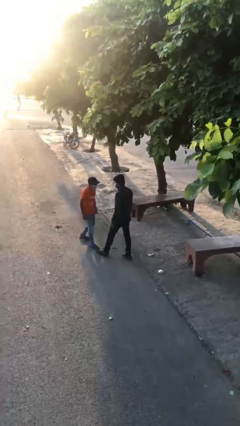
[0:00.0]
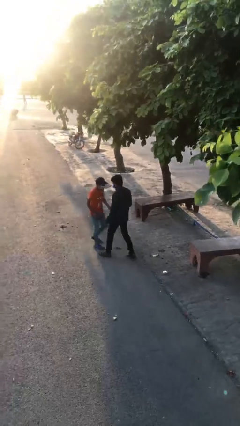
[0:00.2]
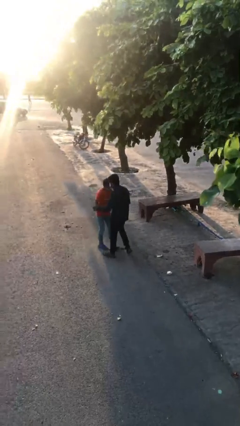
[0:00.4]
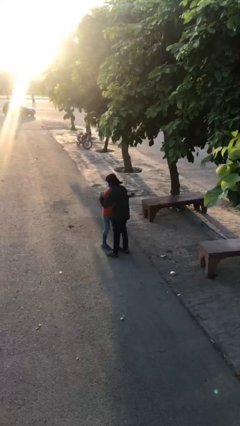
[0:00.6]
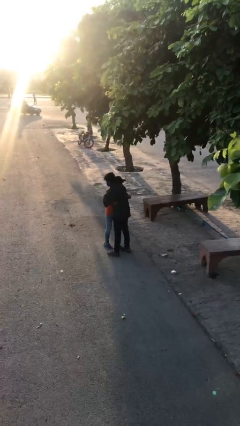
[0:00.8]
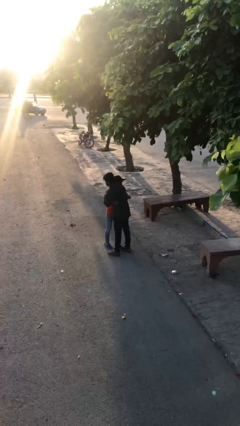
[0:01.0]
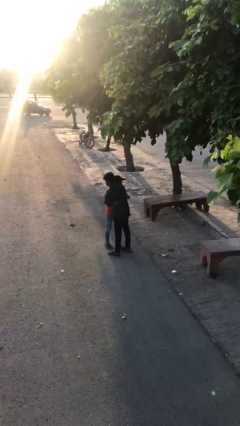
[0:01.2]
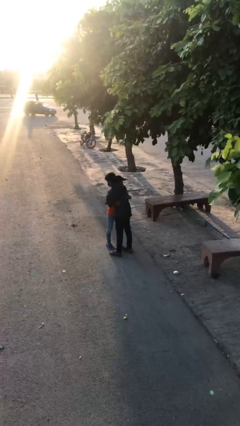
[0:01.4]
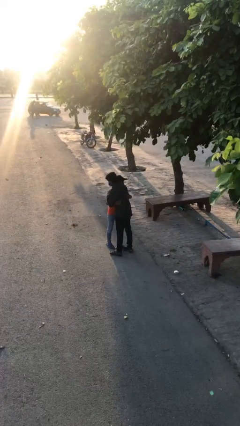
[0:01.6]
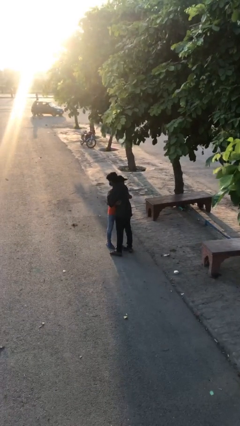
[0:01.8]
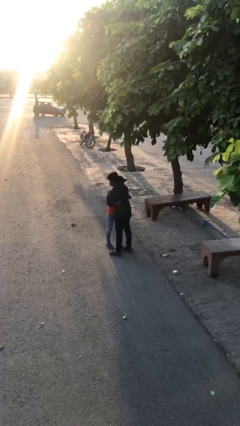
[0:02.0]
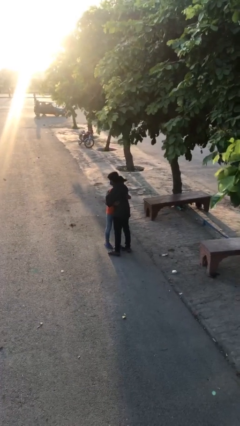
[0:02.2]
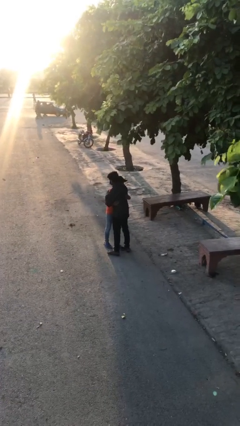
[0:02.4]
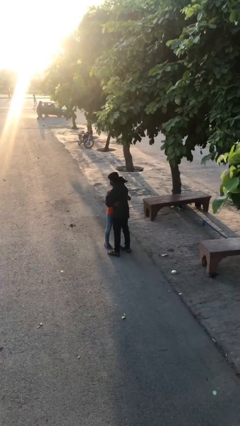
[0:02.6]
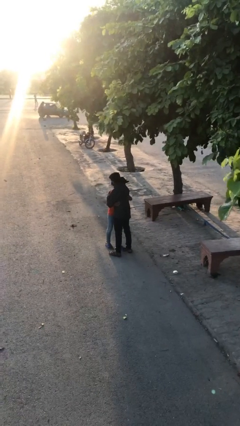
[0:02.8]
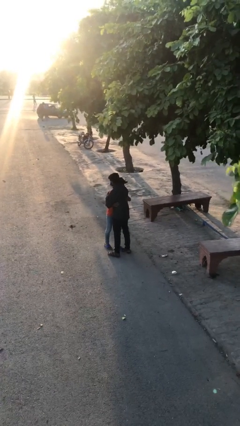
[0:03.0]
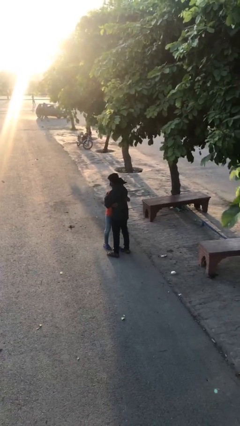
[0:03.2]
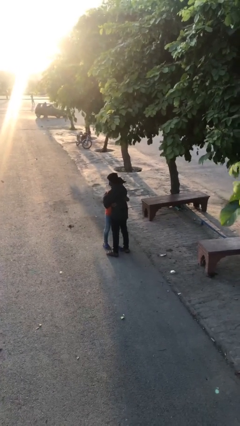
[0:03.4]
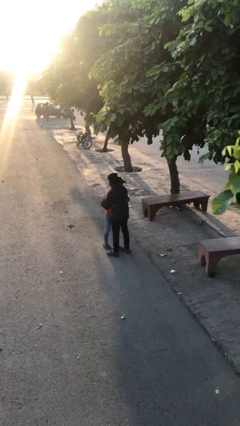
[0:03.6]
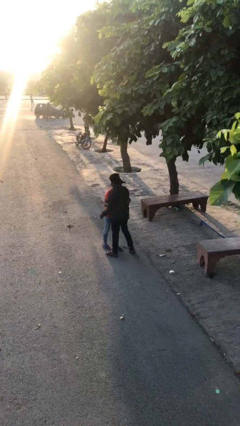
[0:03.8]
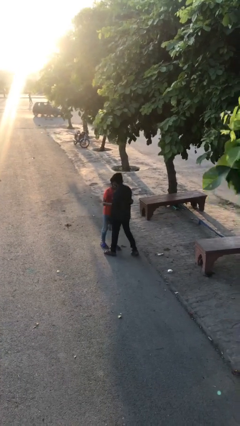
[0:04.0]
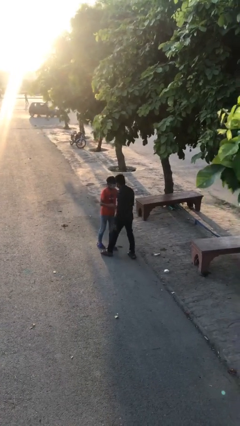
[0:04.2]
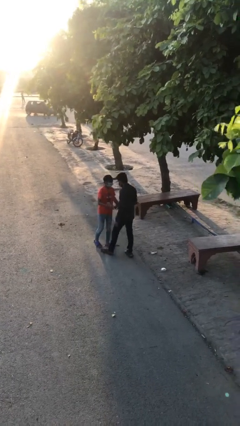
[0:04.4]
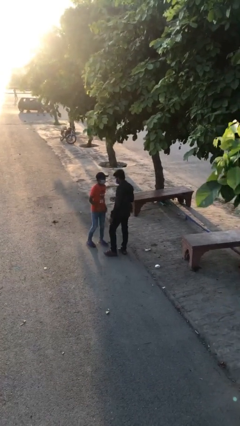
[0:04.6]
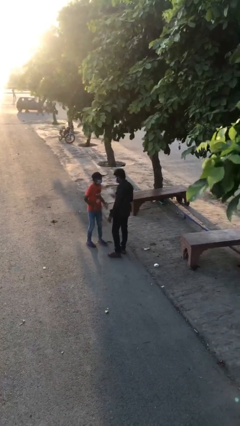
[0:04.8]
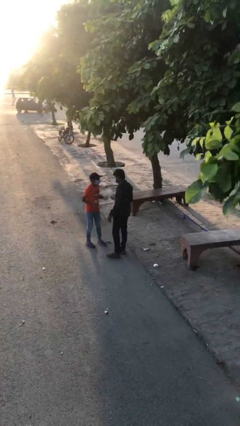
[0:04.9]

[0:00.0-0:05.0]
person embraces person

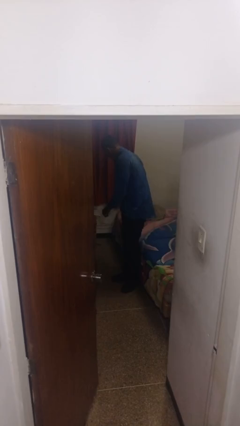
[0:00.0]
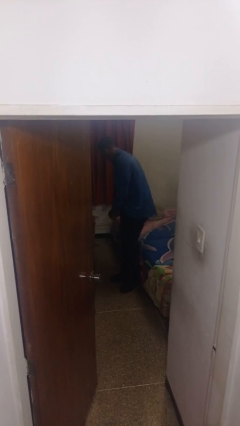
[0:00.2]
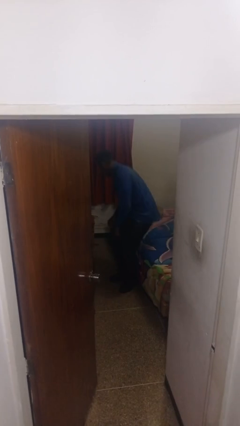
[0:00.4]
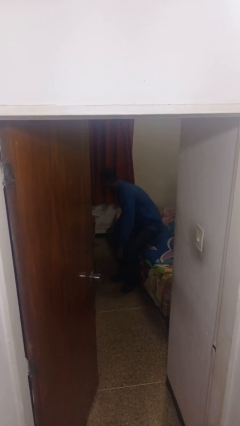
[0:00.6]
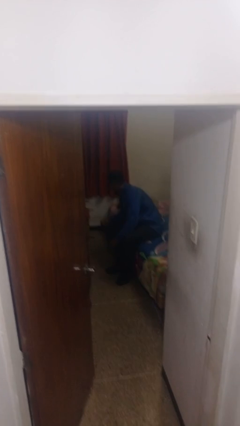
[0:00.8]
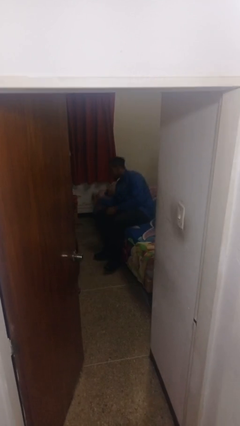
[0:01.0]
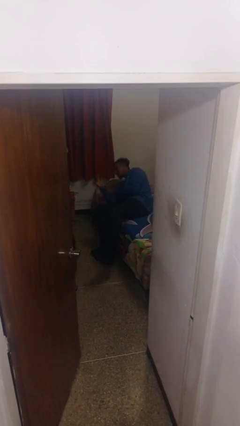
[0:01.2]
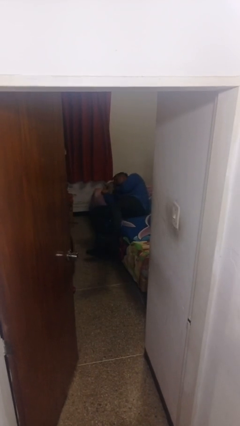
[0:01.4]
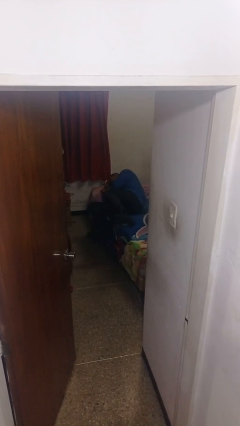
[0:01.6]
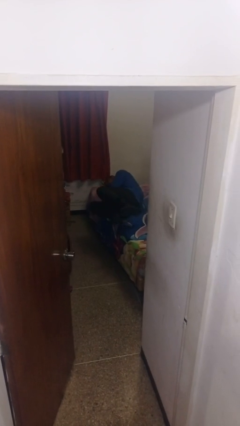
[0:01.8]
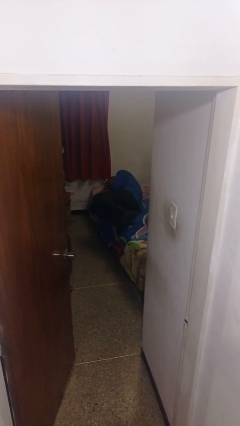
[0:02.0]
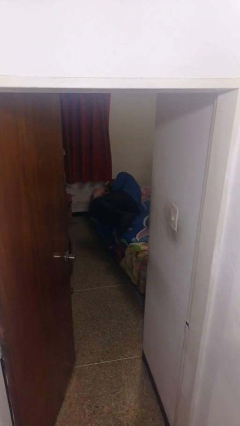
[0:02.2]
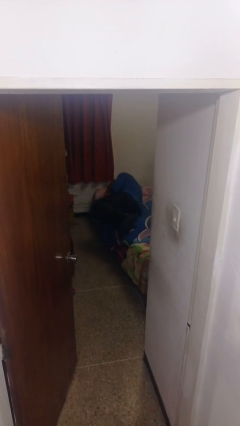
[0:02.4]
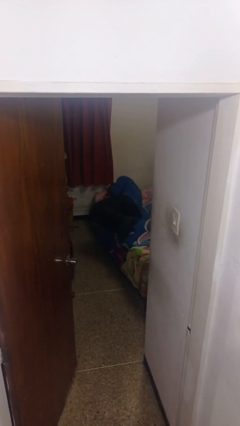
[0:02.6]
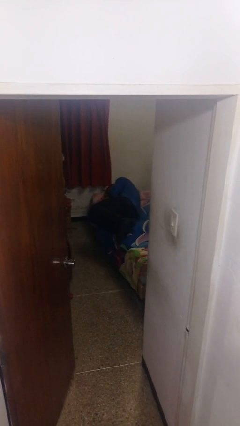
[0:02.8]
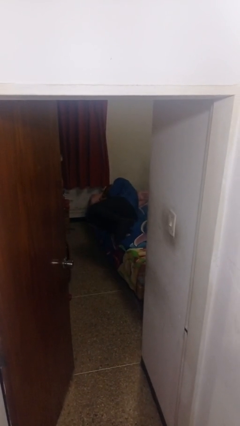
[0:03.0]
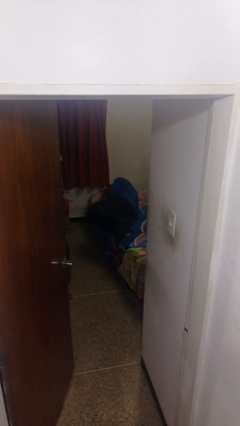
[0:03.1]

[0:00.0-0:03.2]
person lies down on bed

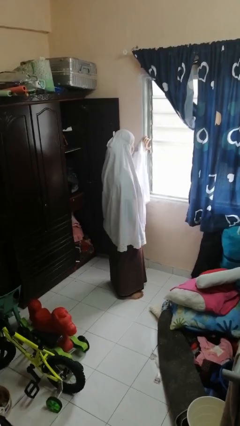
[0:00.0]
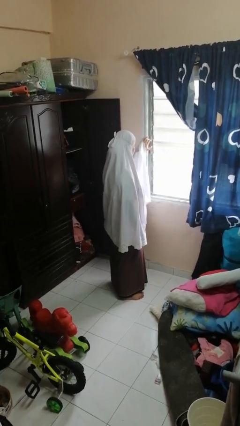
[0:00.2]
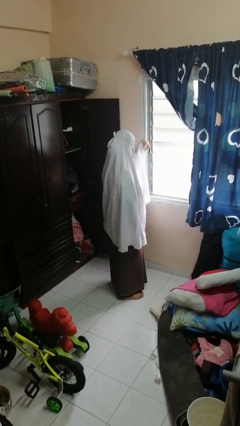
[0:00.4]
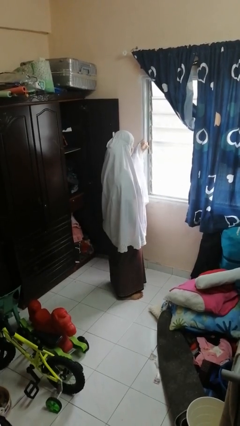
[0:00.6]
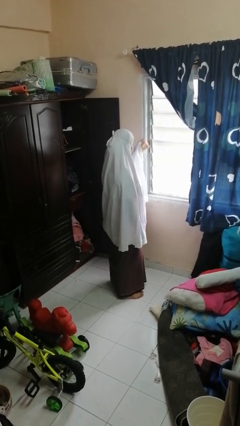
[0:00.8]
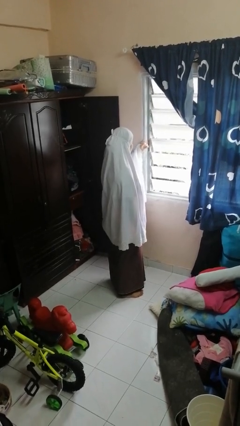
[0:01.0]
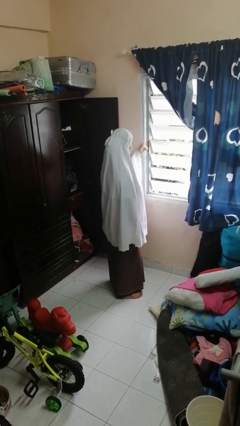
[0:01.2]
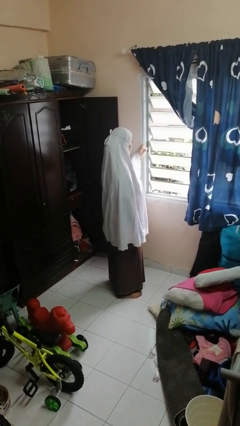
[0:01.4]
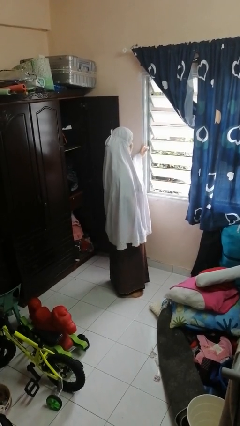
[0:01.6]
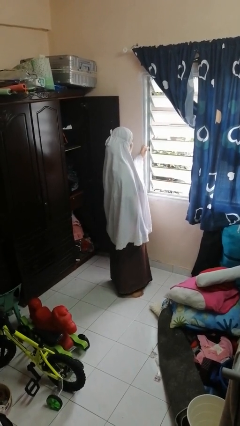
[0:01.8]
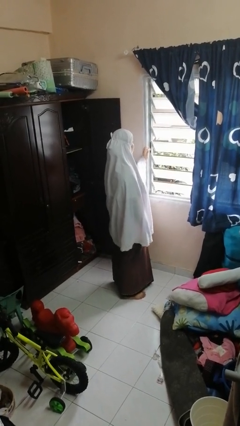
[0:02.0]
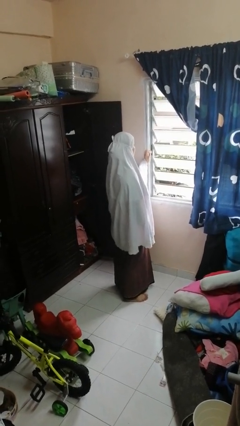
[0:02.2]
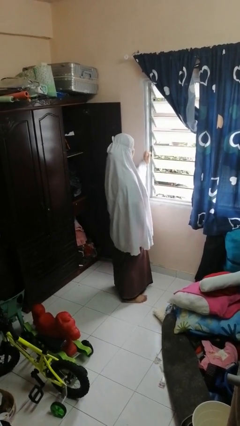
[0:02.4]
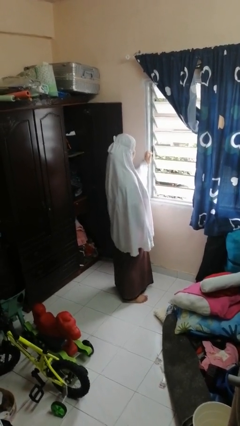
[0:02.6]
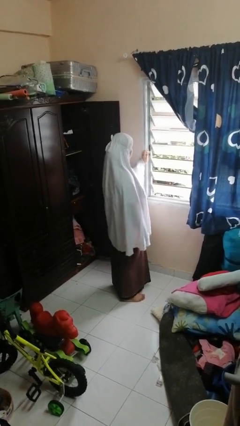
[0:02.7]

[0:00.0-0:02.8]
person opens home window

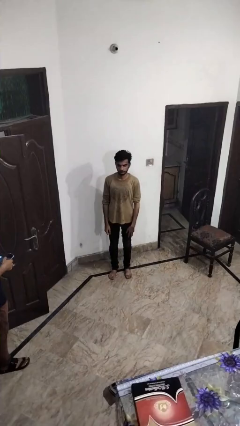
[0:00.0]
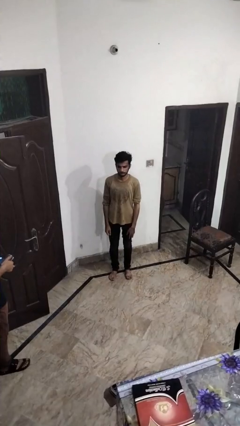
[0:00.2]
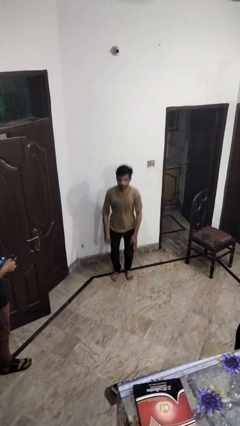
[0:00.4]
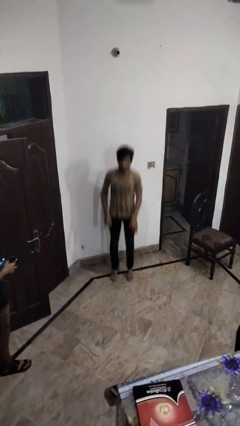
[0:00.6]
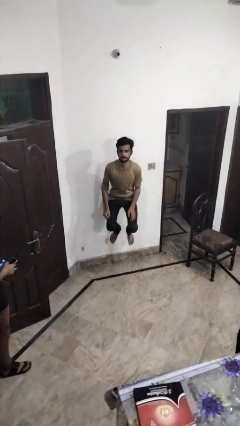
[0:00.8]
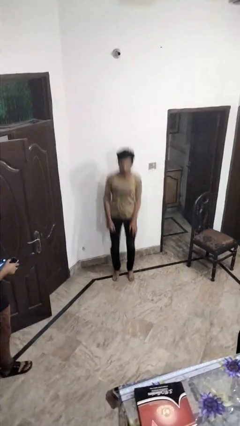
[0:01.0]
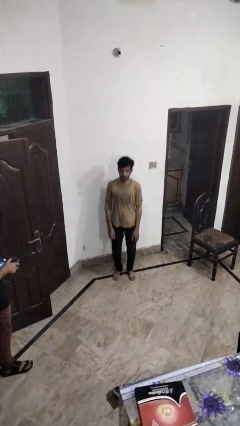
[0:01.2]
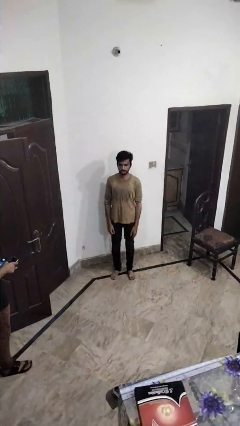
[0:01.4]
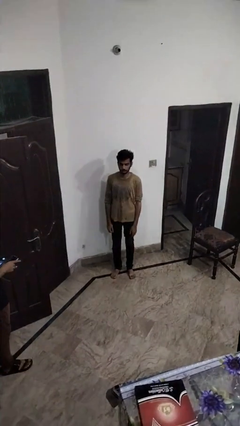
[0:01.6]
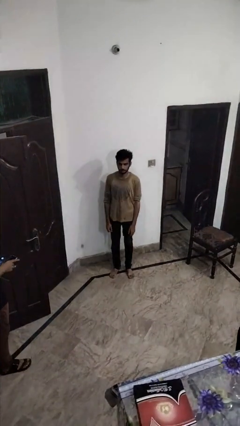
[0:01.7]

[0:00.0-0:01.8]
person jumps

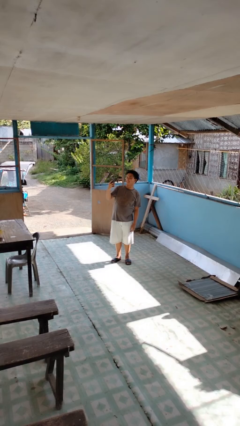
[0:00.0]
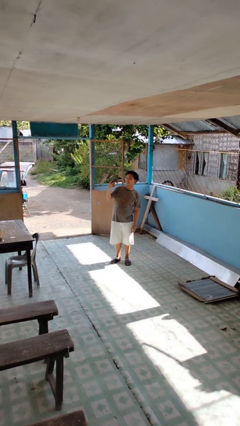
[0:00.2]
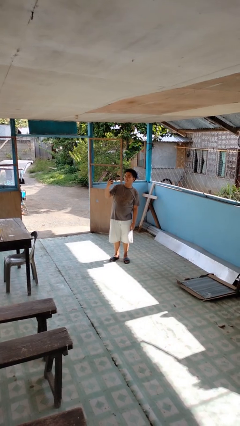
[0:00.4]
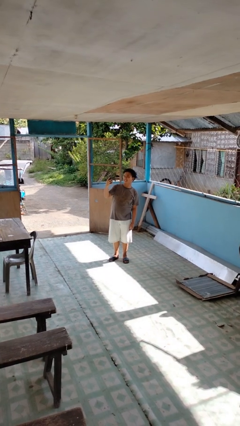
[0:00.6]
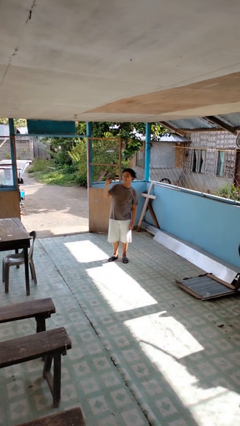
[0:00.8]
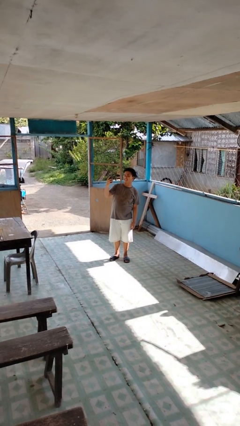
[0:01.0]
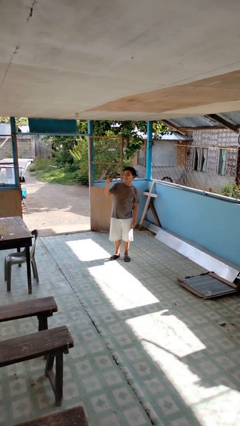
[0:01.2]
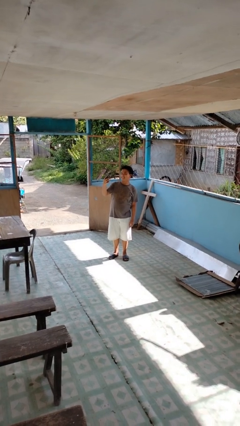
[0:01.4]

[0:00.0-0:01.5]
person takes selfie

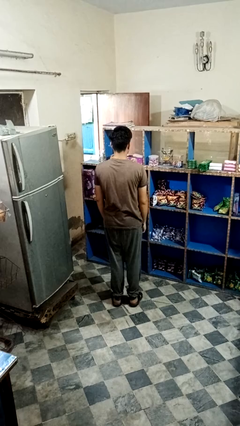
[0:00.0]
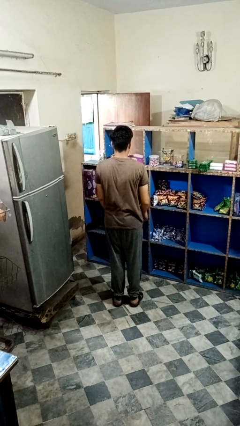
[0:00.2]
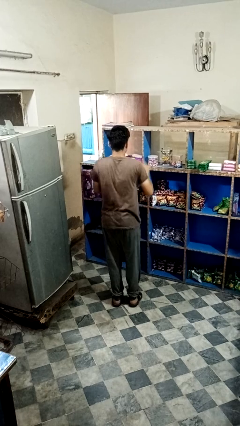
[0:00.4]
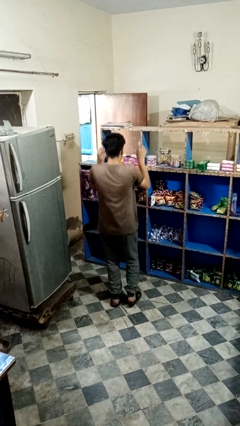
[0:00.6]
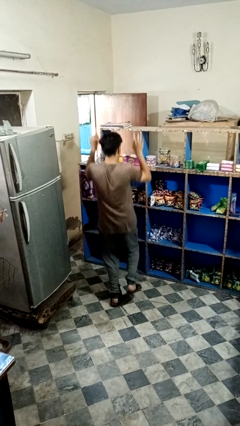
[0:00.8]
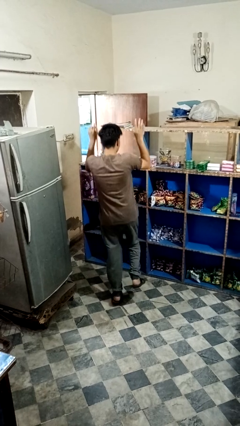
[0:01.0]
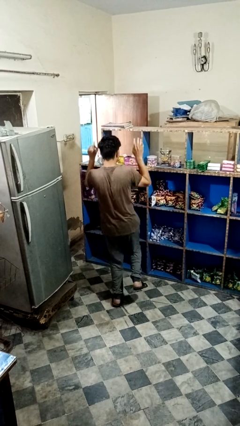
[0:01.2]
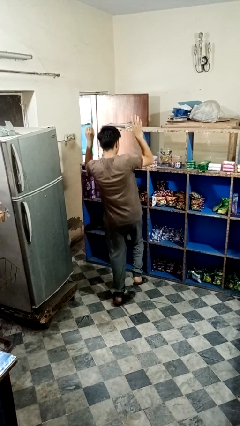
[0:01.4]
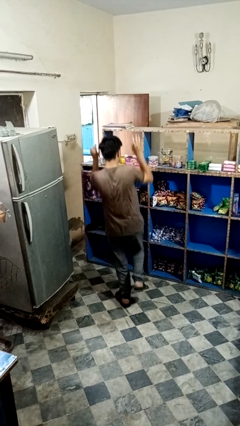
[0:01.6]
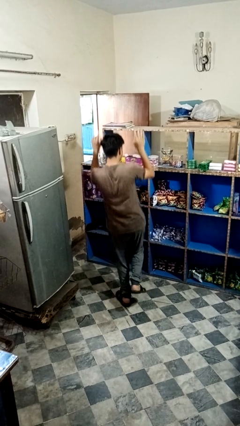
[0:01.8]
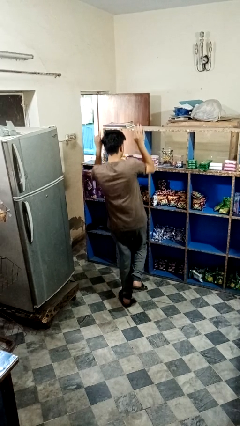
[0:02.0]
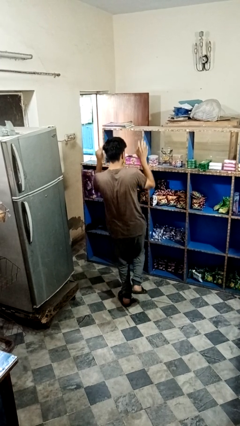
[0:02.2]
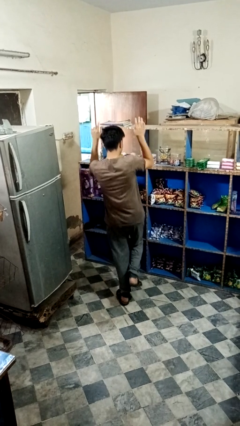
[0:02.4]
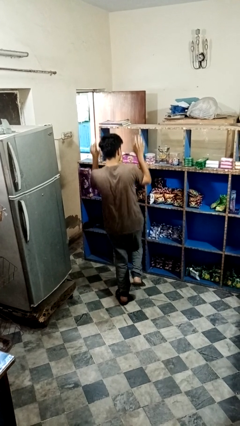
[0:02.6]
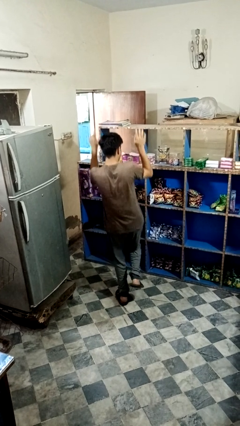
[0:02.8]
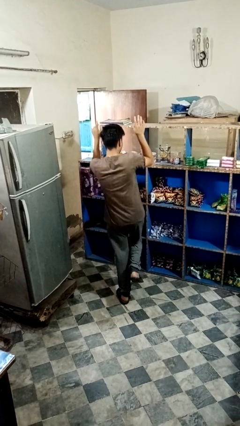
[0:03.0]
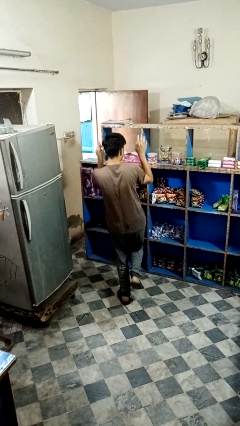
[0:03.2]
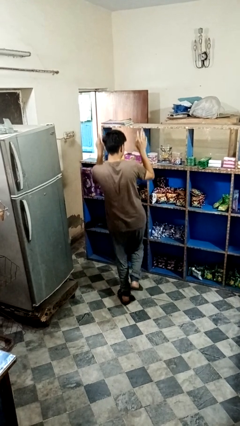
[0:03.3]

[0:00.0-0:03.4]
person dances in place

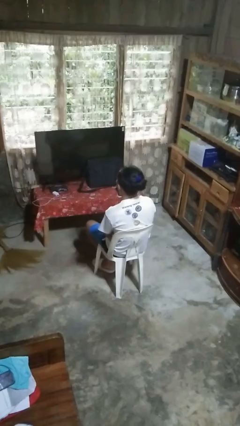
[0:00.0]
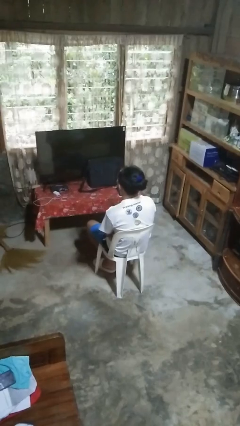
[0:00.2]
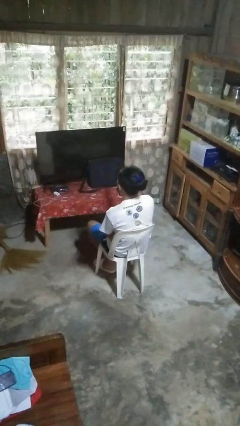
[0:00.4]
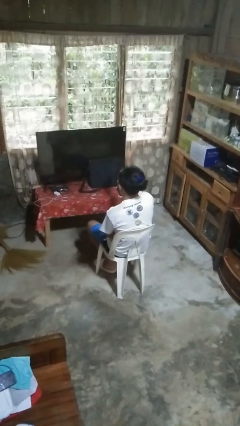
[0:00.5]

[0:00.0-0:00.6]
person gestures swipe down
